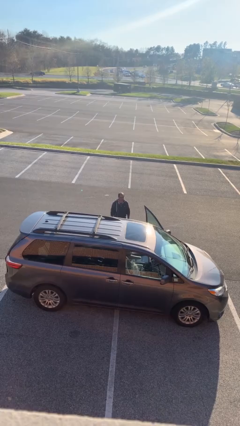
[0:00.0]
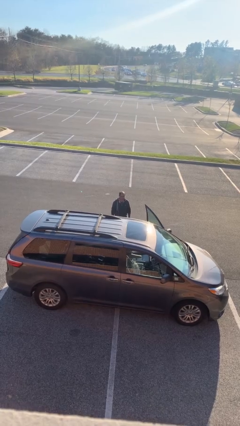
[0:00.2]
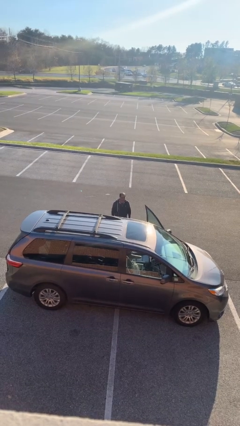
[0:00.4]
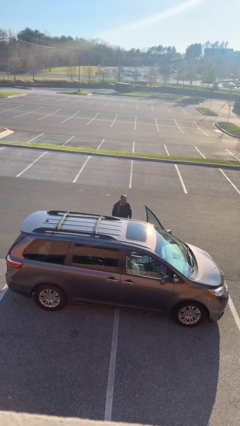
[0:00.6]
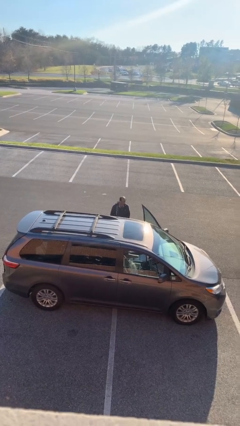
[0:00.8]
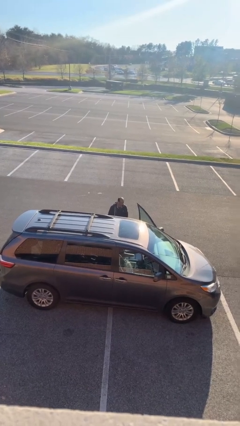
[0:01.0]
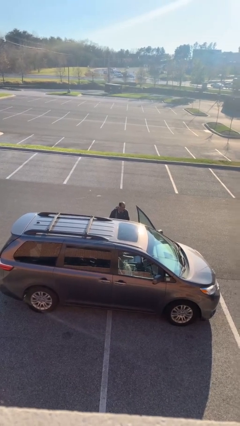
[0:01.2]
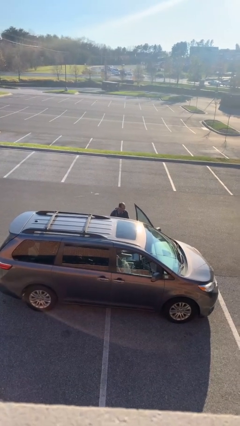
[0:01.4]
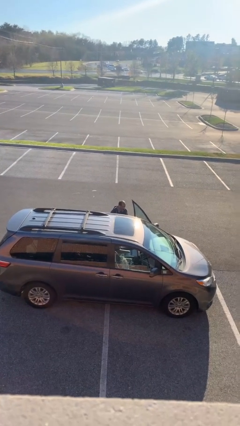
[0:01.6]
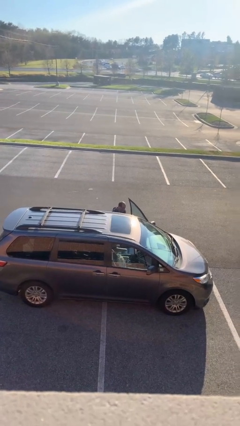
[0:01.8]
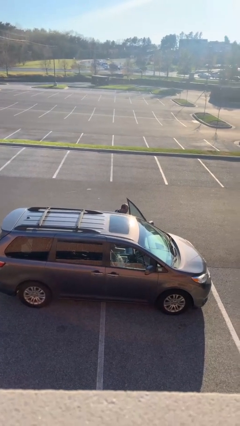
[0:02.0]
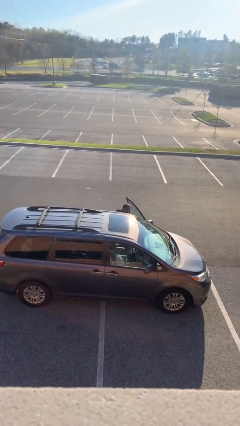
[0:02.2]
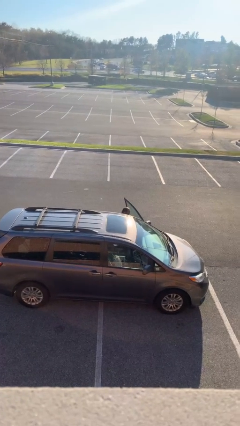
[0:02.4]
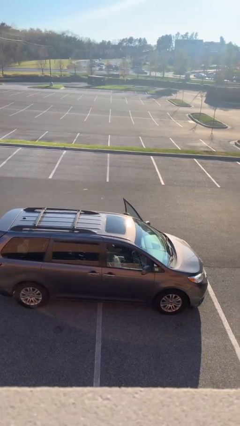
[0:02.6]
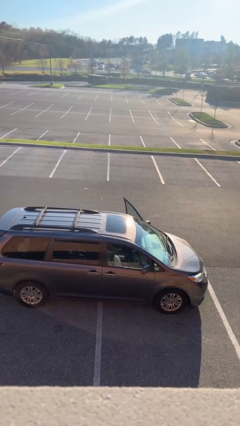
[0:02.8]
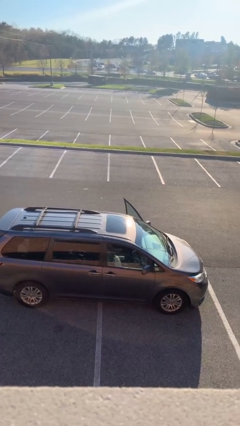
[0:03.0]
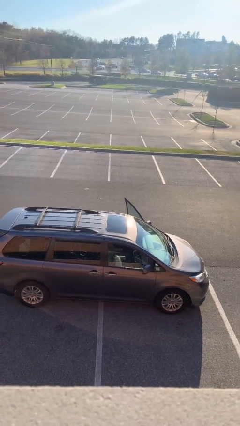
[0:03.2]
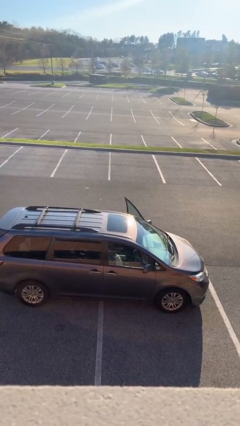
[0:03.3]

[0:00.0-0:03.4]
person enters car

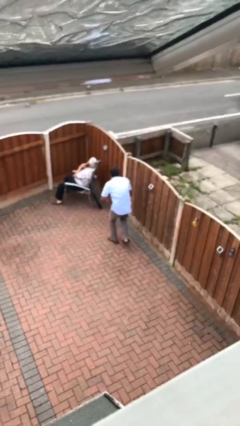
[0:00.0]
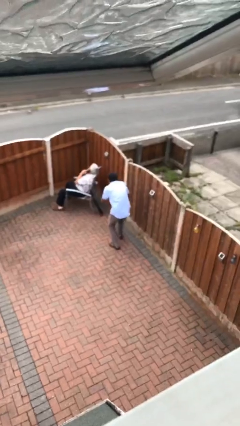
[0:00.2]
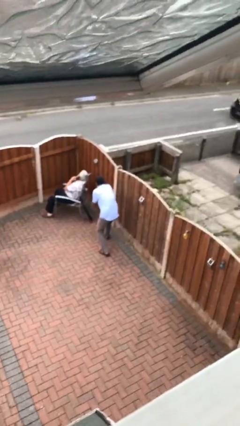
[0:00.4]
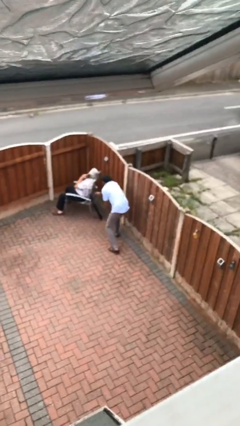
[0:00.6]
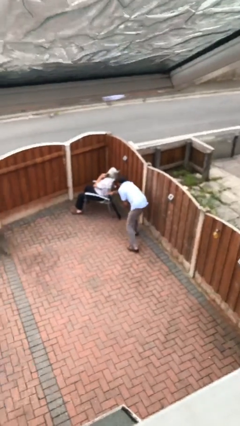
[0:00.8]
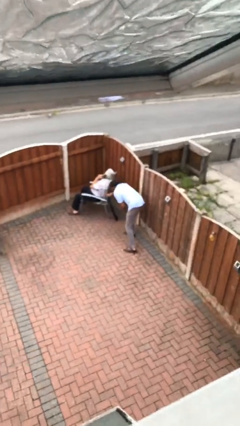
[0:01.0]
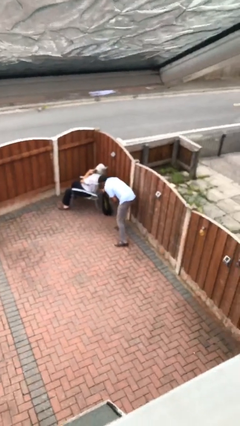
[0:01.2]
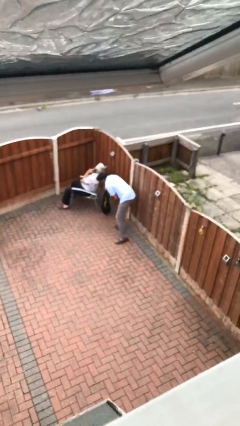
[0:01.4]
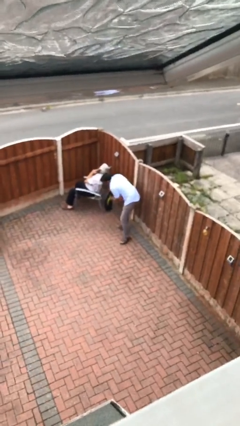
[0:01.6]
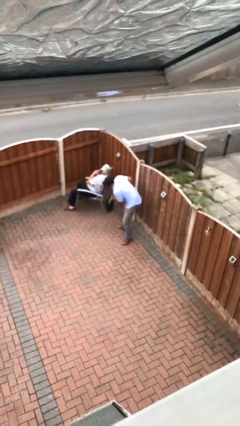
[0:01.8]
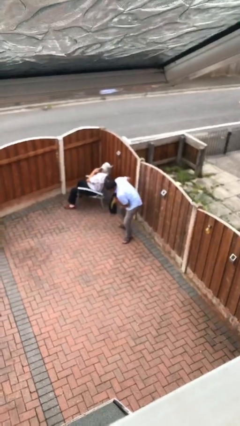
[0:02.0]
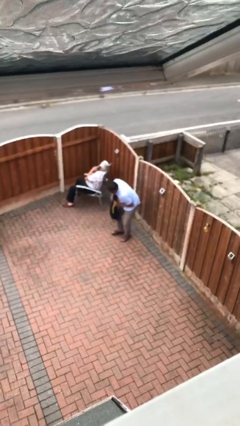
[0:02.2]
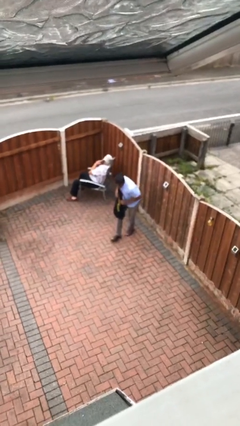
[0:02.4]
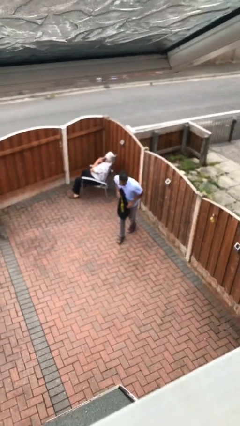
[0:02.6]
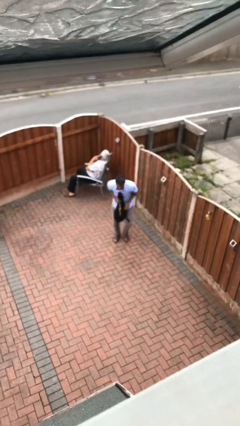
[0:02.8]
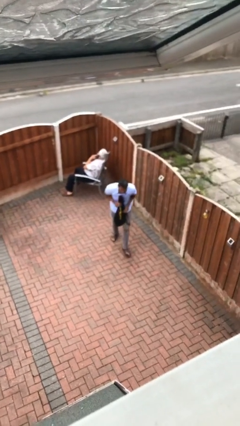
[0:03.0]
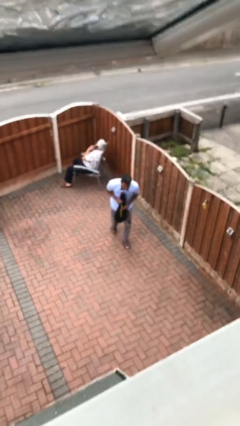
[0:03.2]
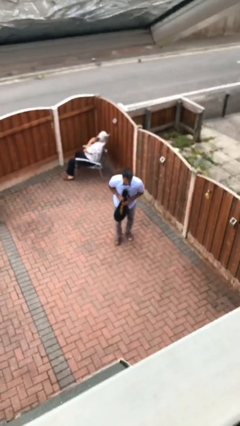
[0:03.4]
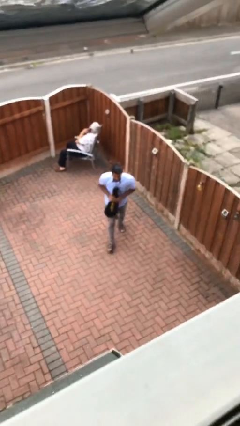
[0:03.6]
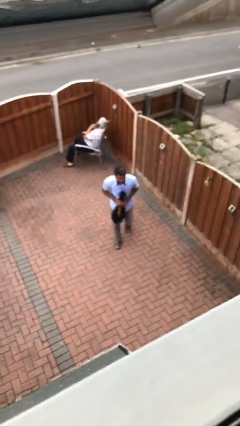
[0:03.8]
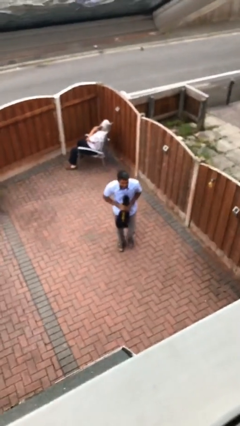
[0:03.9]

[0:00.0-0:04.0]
person steals object from person

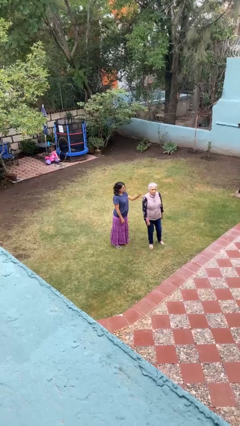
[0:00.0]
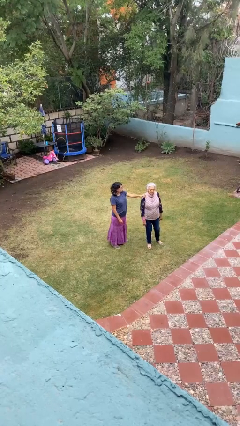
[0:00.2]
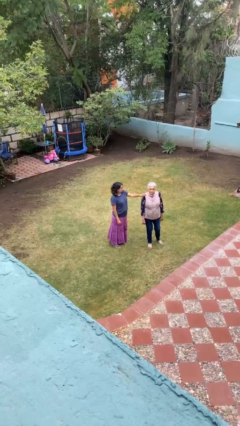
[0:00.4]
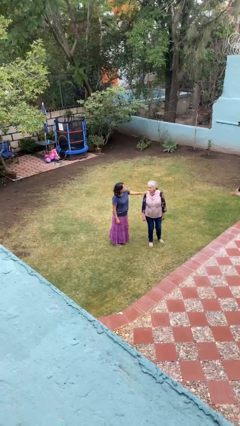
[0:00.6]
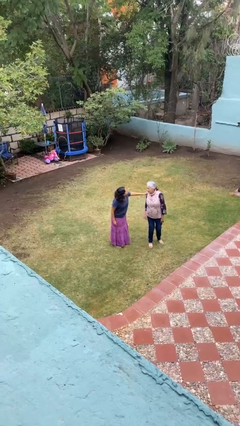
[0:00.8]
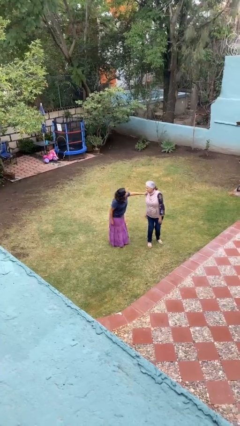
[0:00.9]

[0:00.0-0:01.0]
person grabs person by shoulder

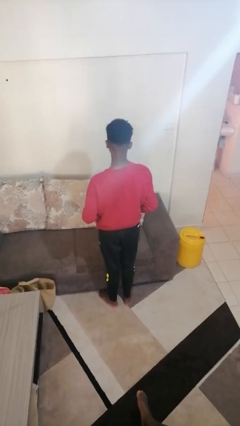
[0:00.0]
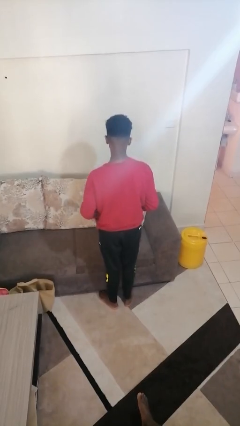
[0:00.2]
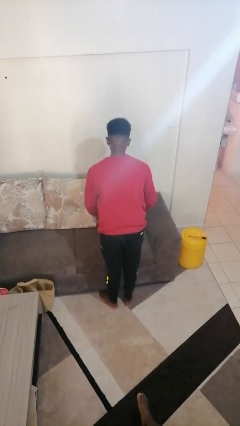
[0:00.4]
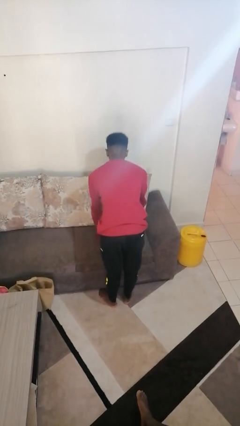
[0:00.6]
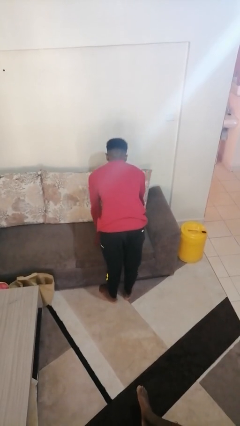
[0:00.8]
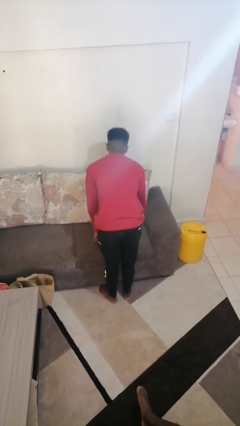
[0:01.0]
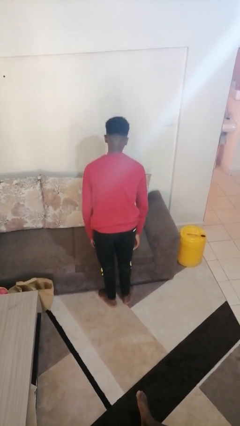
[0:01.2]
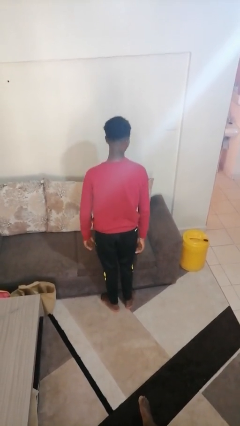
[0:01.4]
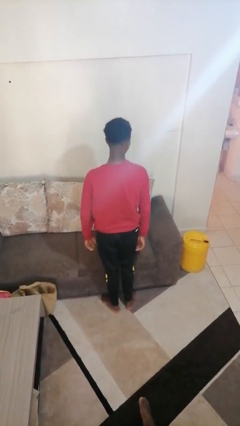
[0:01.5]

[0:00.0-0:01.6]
person puts down object on couch

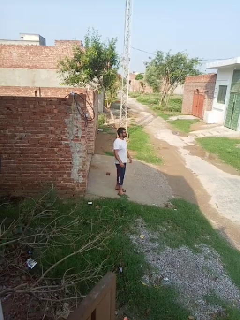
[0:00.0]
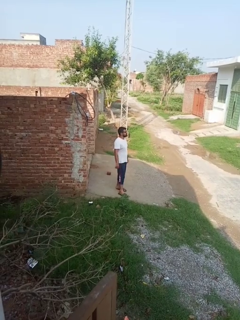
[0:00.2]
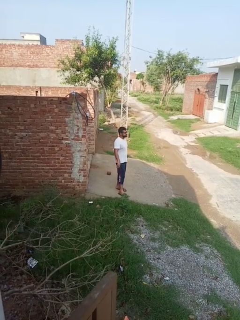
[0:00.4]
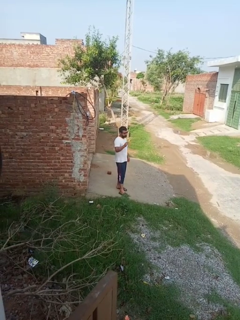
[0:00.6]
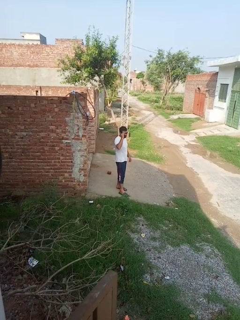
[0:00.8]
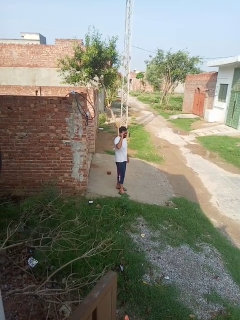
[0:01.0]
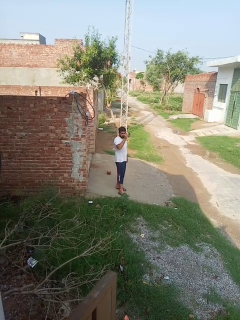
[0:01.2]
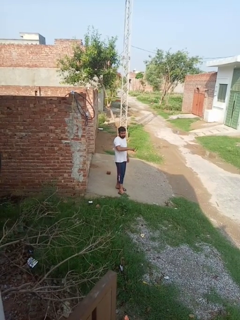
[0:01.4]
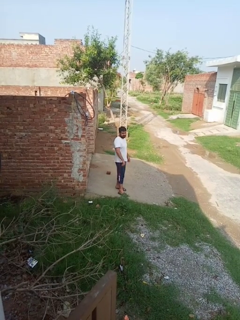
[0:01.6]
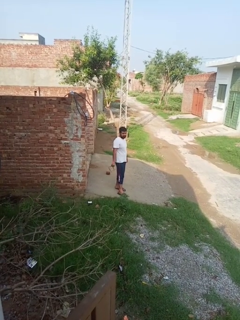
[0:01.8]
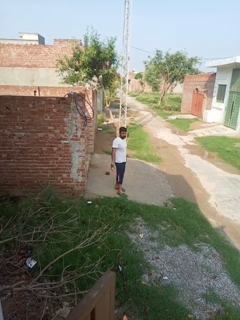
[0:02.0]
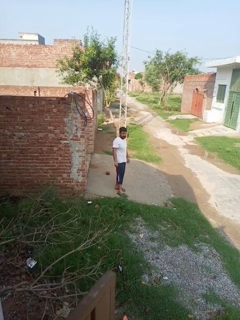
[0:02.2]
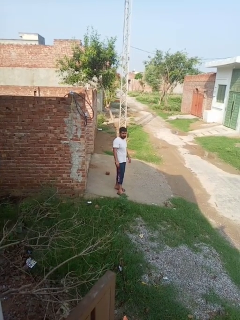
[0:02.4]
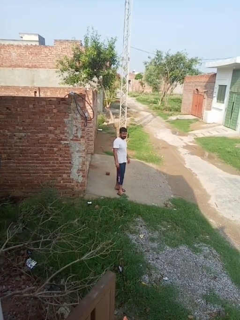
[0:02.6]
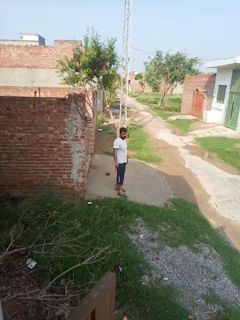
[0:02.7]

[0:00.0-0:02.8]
person takes off glasses

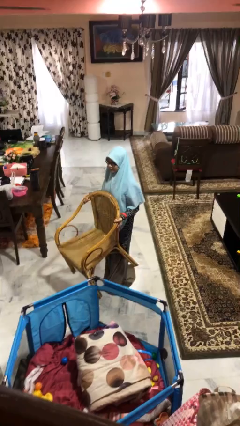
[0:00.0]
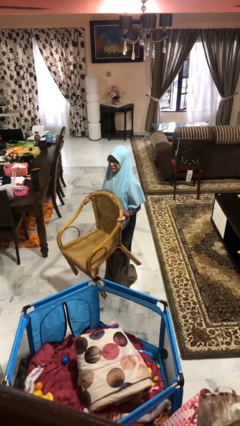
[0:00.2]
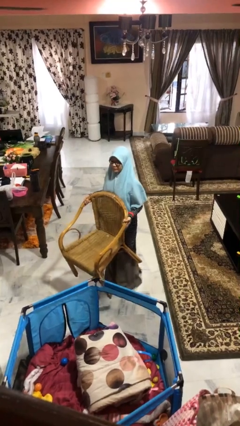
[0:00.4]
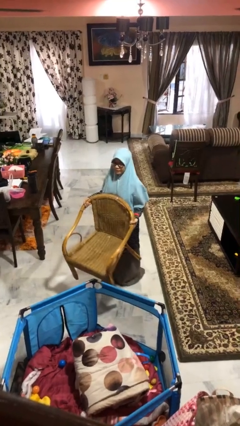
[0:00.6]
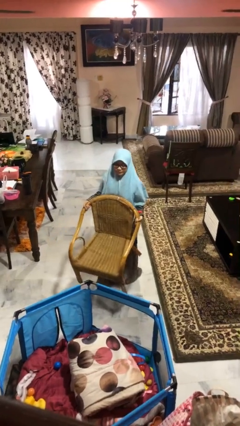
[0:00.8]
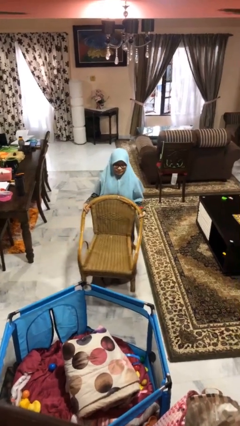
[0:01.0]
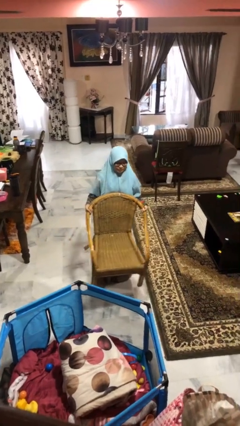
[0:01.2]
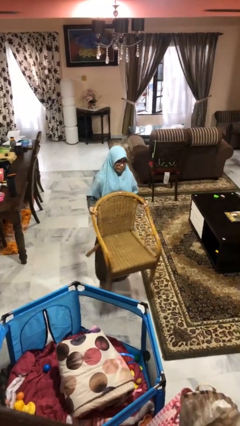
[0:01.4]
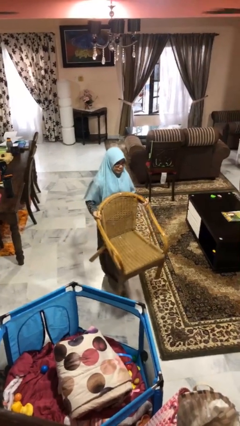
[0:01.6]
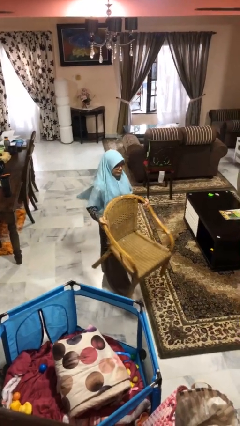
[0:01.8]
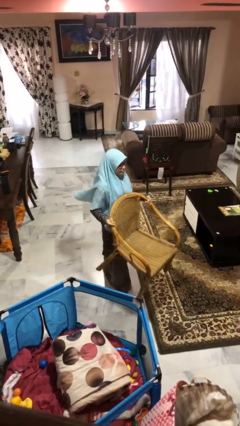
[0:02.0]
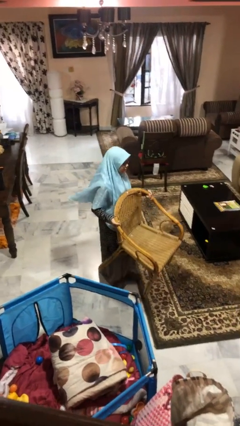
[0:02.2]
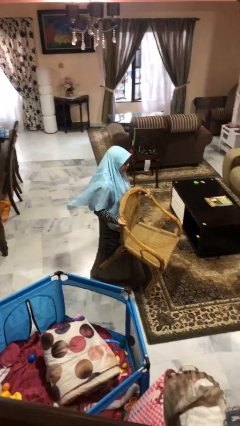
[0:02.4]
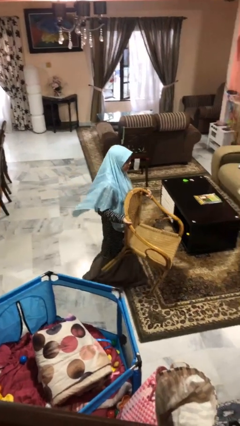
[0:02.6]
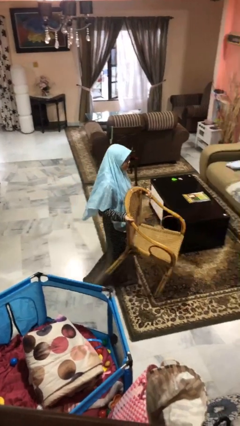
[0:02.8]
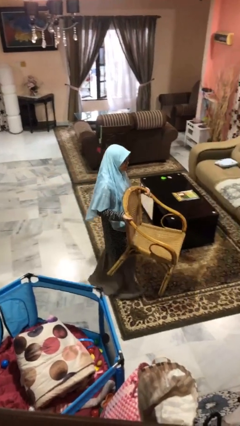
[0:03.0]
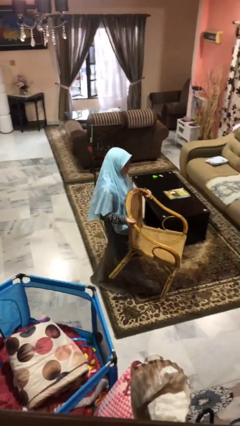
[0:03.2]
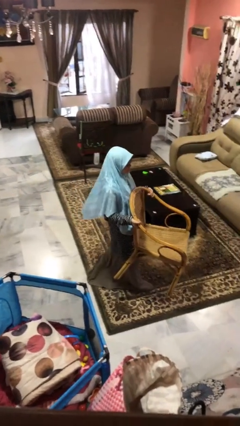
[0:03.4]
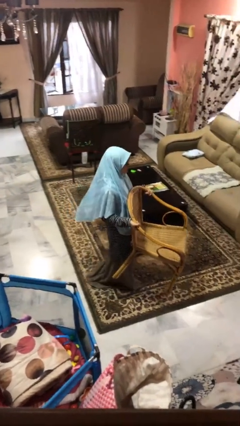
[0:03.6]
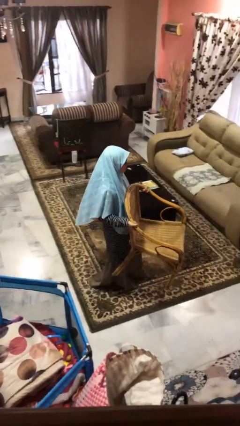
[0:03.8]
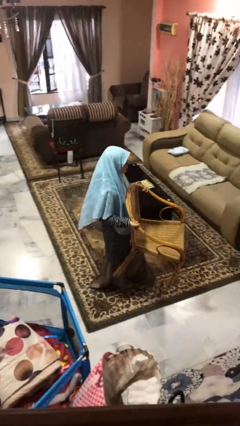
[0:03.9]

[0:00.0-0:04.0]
person carries furniture

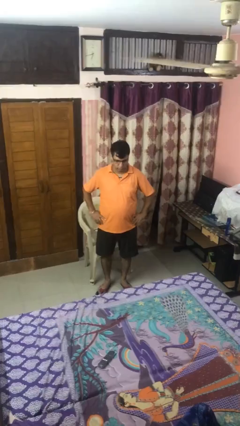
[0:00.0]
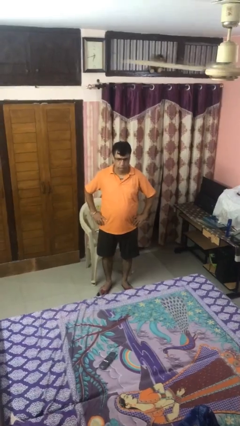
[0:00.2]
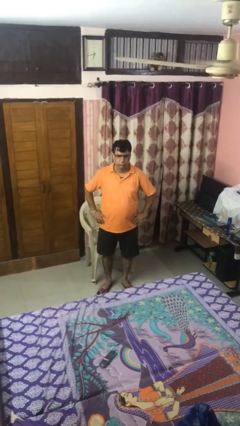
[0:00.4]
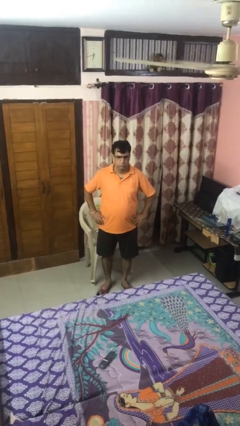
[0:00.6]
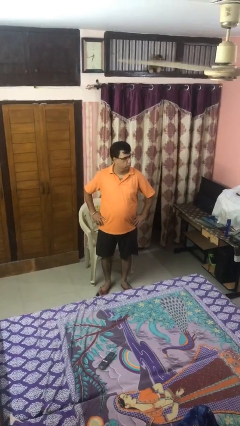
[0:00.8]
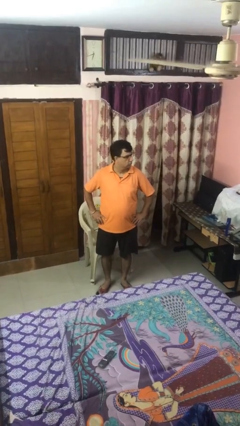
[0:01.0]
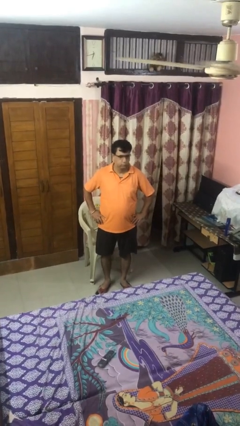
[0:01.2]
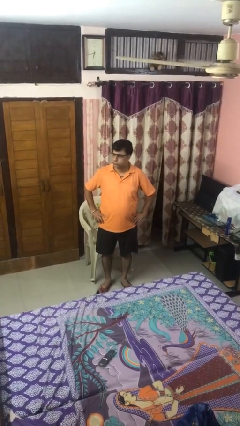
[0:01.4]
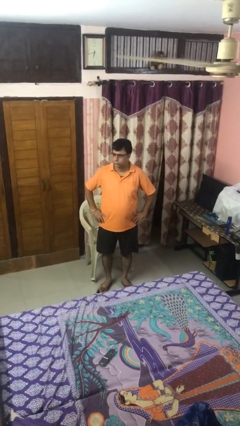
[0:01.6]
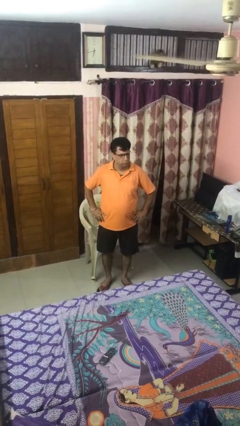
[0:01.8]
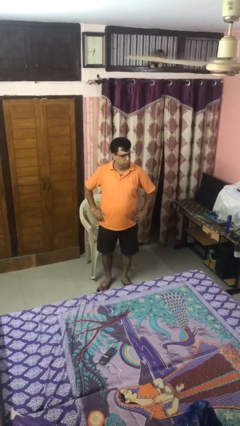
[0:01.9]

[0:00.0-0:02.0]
person shakes head
